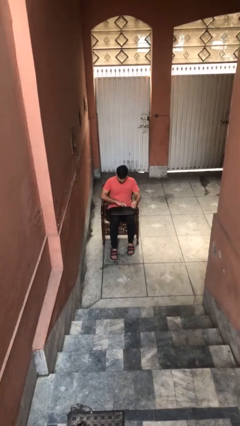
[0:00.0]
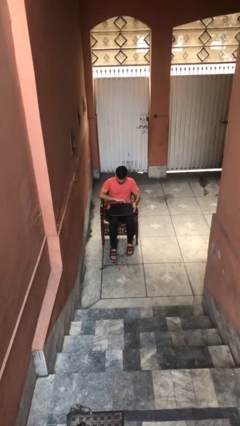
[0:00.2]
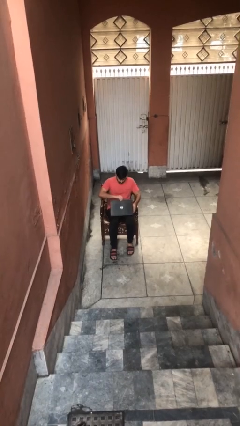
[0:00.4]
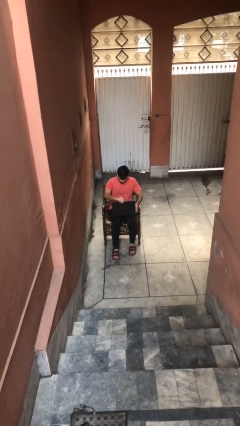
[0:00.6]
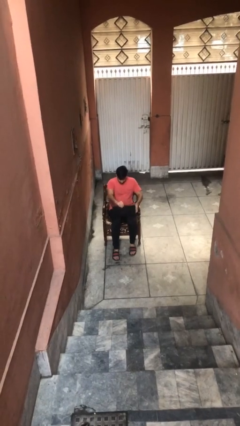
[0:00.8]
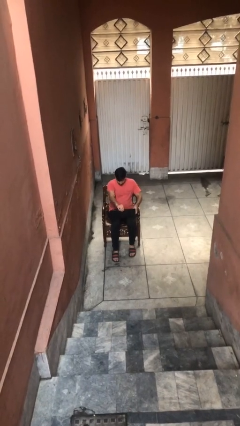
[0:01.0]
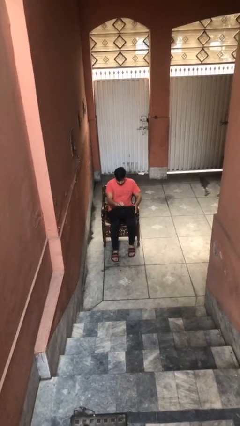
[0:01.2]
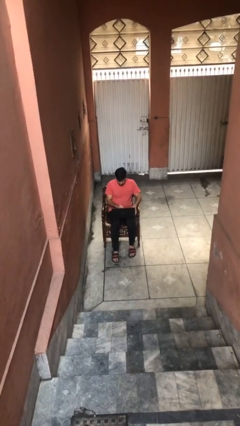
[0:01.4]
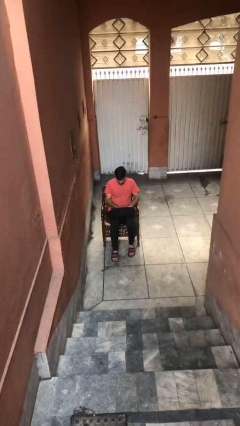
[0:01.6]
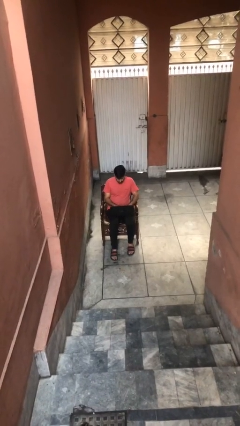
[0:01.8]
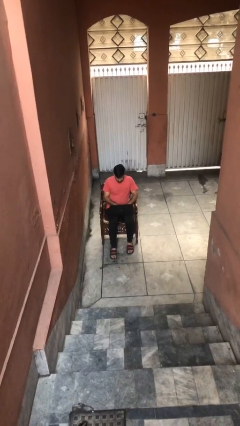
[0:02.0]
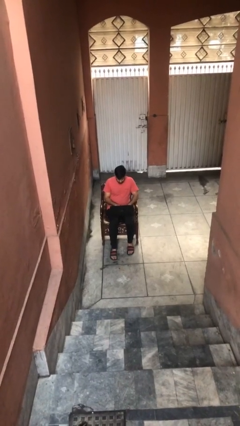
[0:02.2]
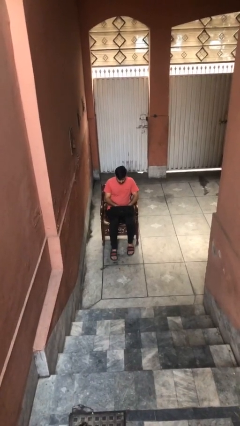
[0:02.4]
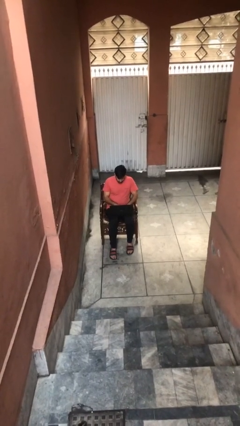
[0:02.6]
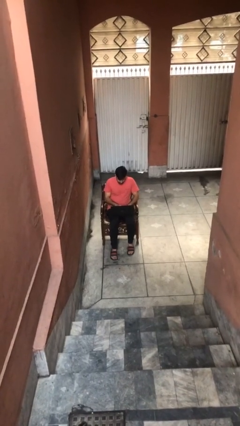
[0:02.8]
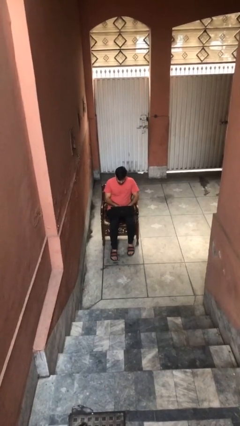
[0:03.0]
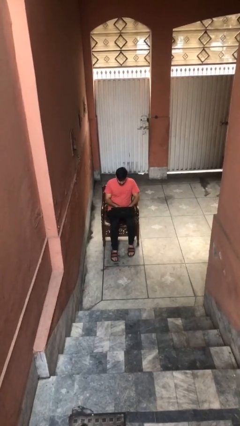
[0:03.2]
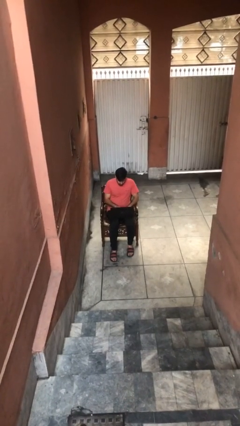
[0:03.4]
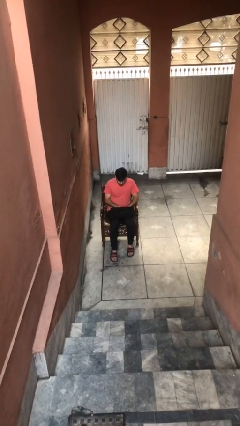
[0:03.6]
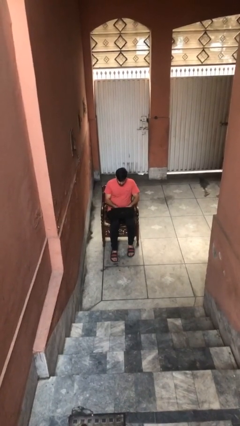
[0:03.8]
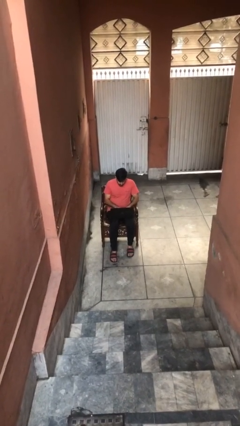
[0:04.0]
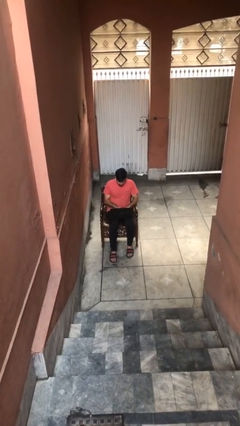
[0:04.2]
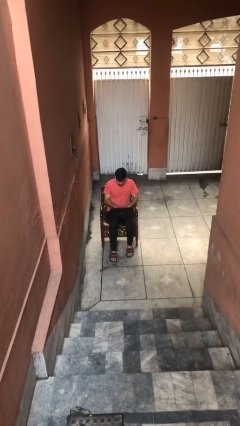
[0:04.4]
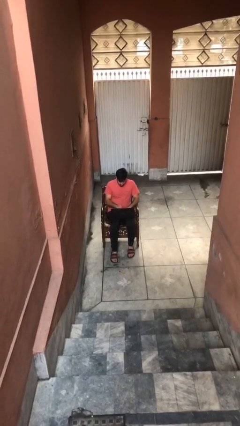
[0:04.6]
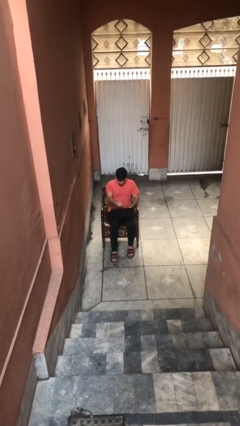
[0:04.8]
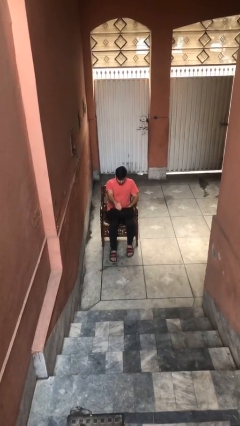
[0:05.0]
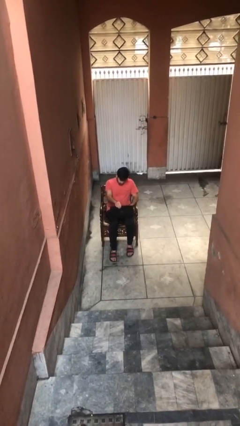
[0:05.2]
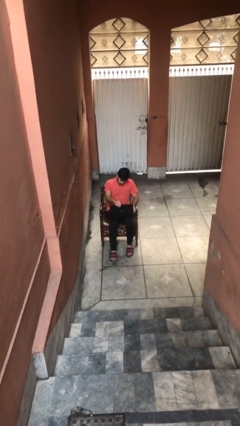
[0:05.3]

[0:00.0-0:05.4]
person interacts with laptop

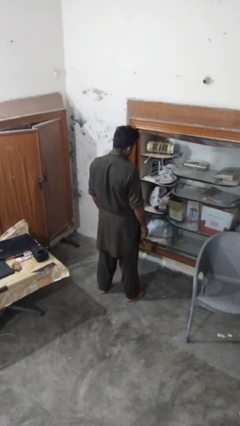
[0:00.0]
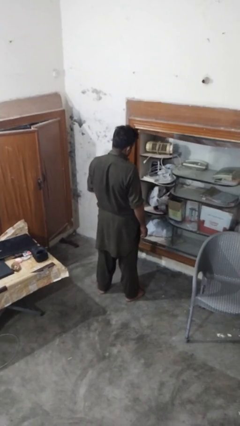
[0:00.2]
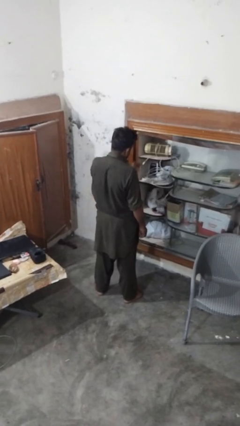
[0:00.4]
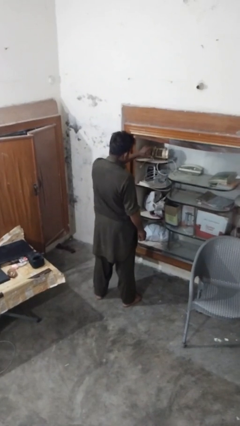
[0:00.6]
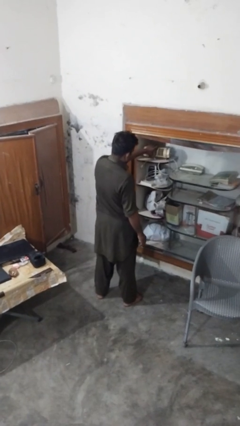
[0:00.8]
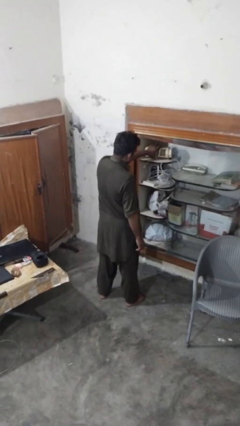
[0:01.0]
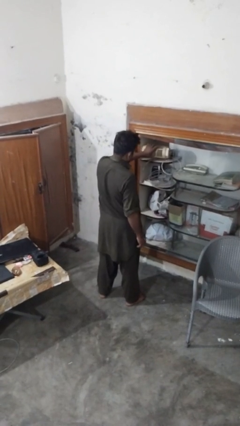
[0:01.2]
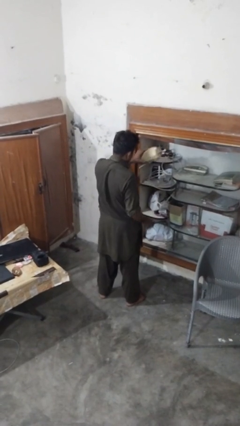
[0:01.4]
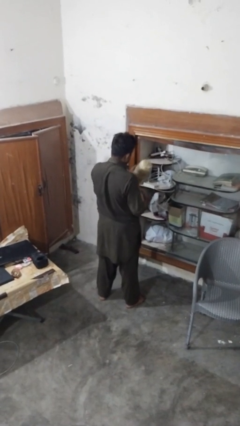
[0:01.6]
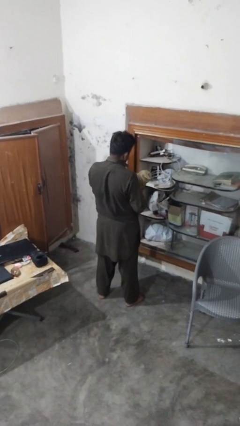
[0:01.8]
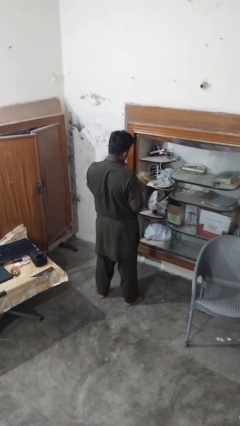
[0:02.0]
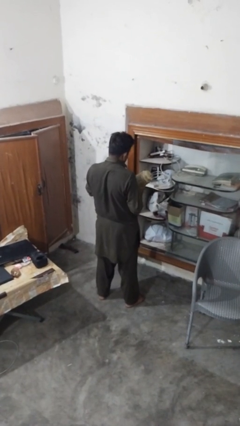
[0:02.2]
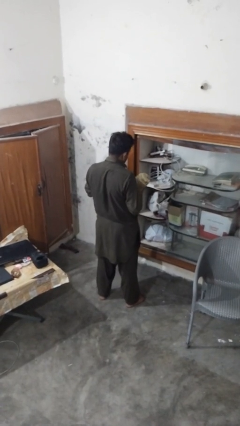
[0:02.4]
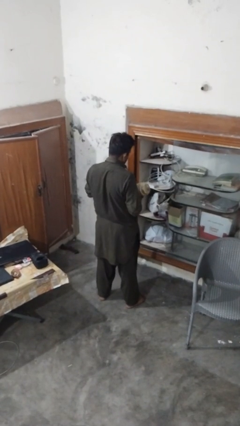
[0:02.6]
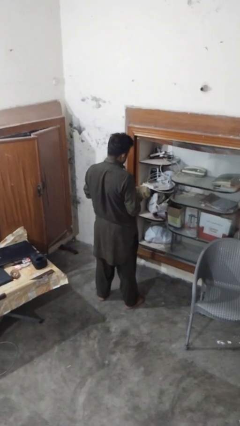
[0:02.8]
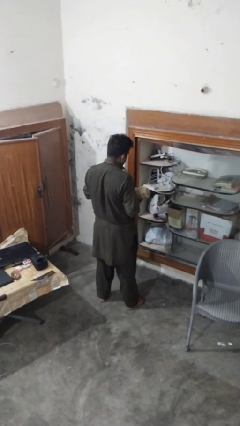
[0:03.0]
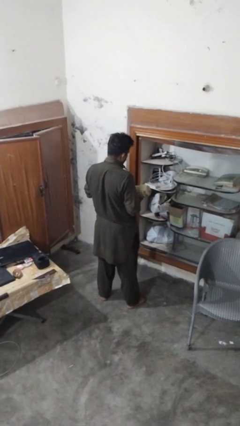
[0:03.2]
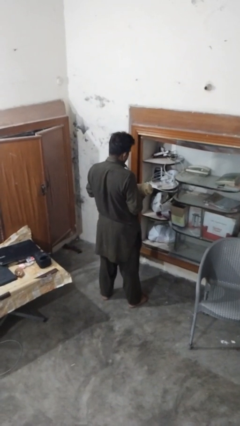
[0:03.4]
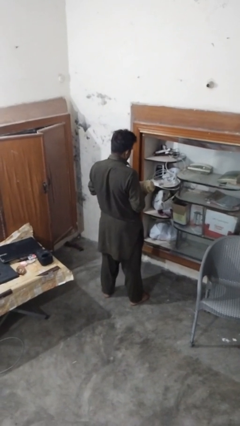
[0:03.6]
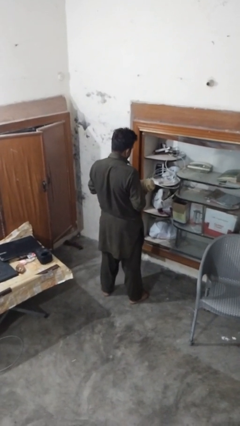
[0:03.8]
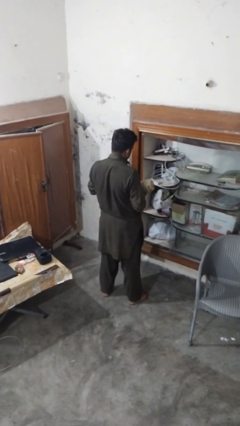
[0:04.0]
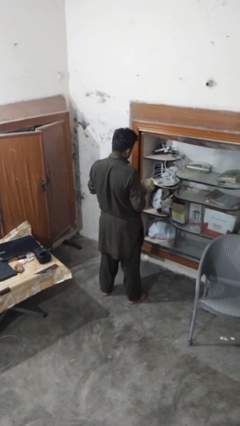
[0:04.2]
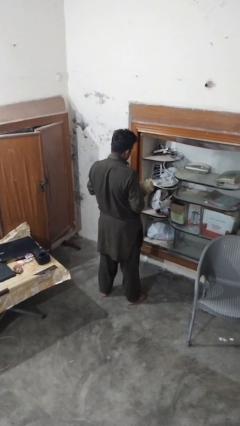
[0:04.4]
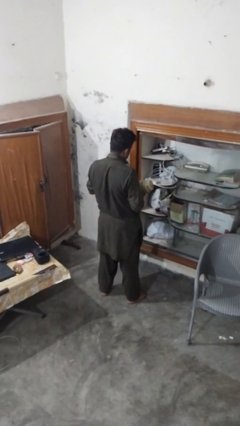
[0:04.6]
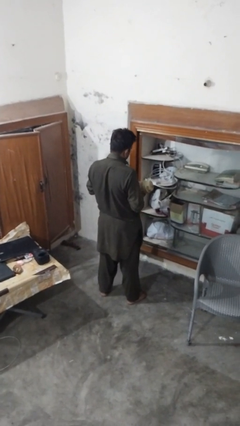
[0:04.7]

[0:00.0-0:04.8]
person picks up object from countertop

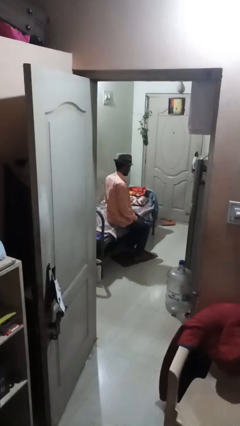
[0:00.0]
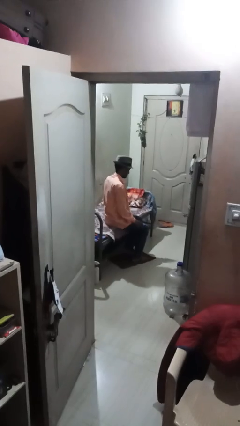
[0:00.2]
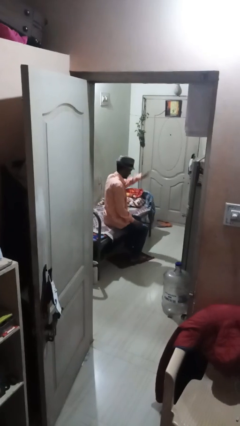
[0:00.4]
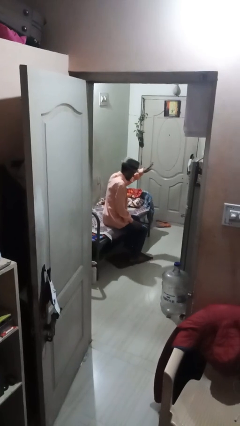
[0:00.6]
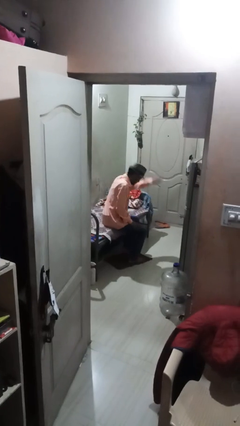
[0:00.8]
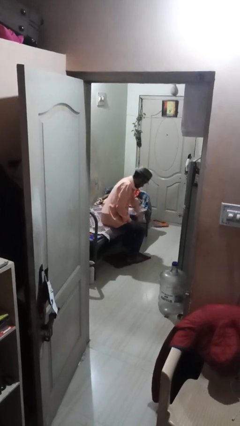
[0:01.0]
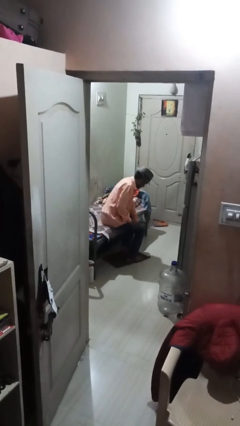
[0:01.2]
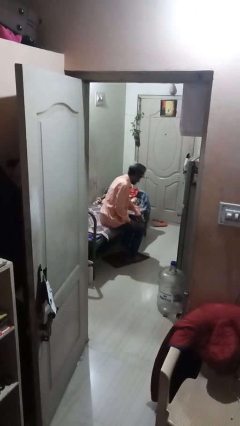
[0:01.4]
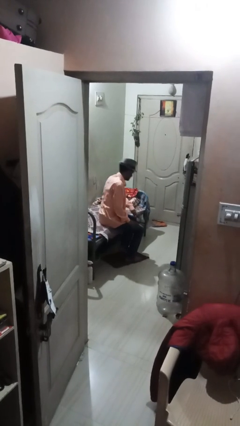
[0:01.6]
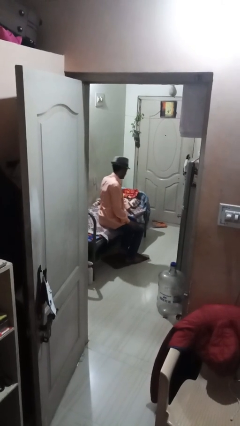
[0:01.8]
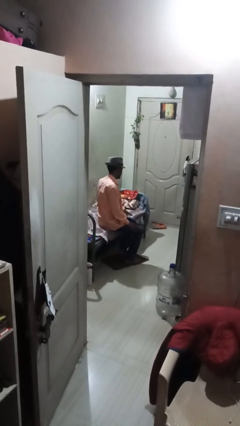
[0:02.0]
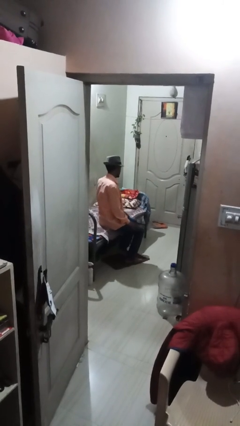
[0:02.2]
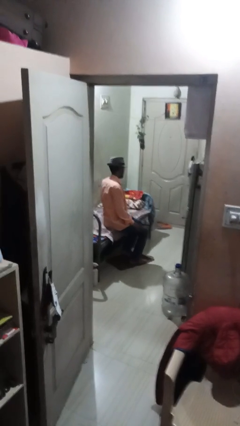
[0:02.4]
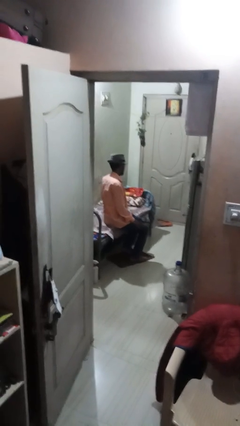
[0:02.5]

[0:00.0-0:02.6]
person swats bug

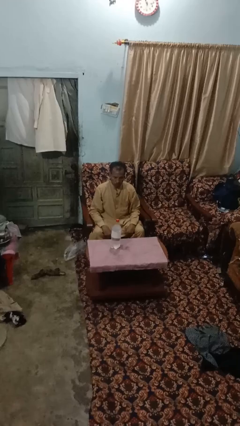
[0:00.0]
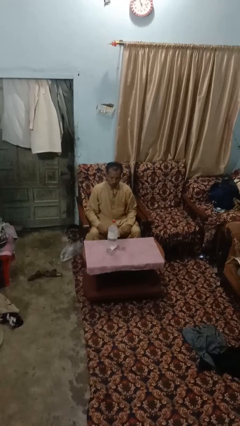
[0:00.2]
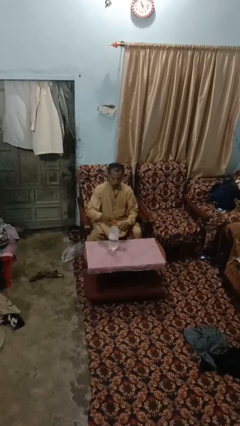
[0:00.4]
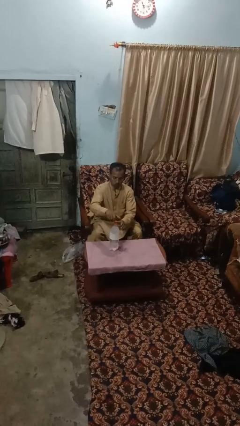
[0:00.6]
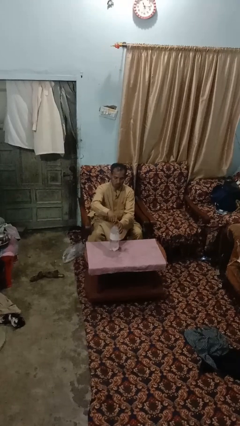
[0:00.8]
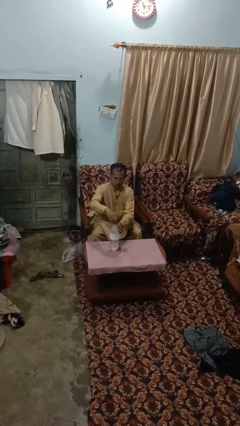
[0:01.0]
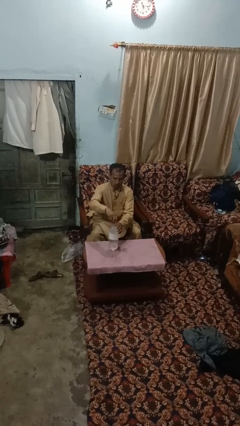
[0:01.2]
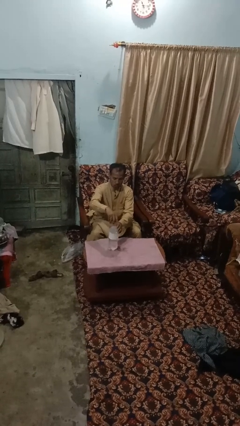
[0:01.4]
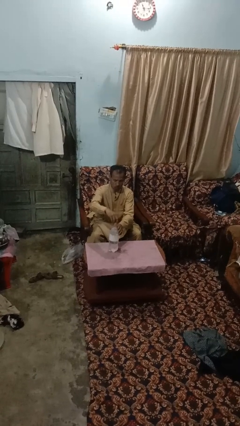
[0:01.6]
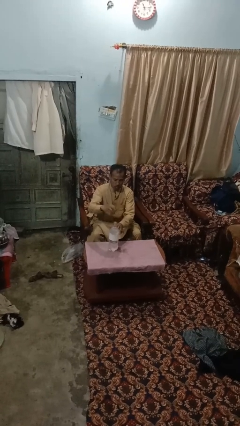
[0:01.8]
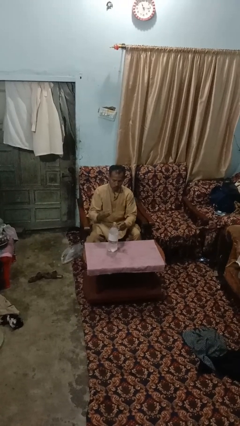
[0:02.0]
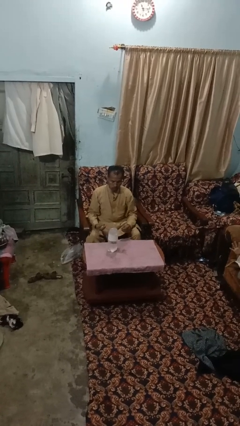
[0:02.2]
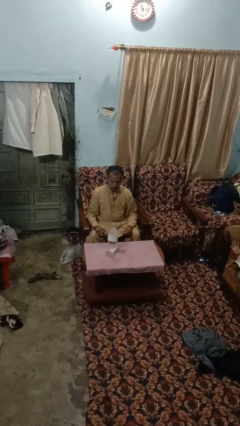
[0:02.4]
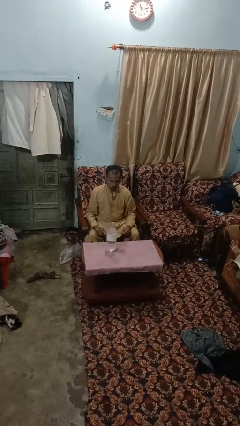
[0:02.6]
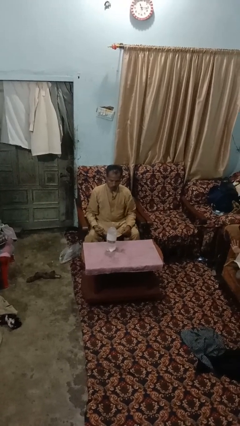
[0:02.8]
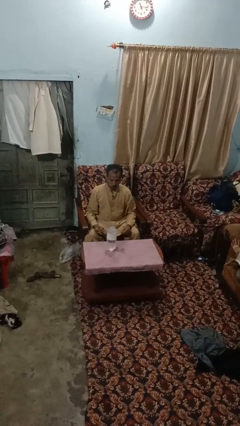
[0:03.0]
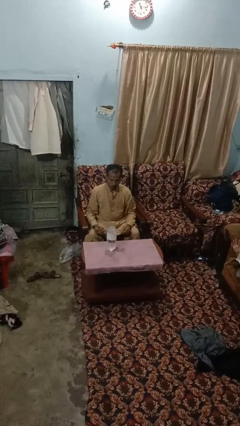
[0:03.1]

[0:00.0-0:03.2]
person unscrews lid from bottle

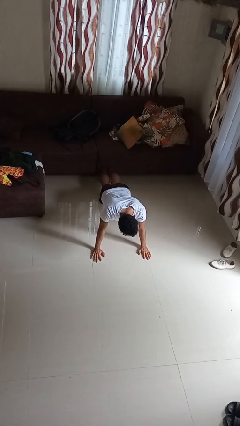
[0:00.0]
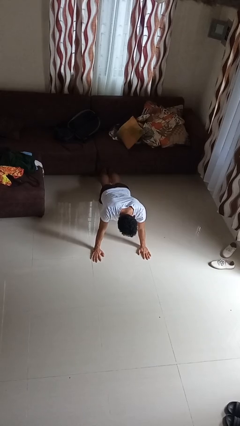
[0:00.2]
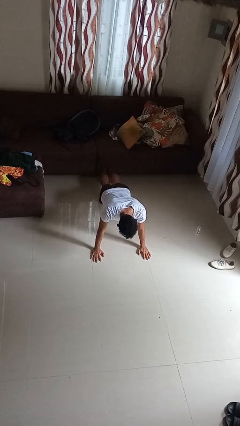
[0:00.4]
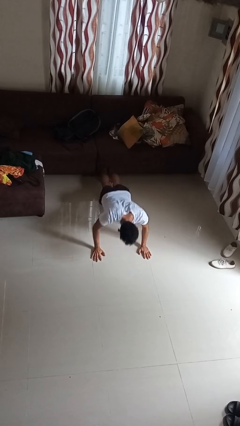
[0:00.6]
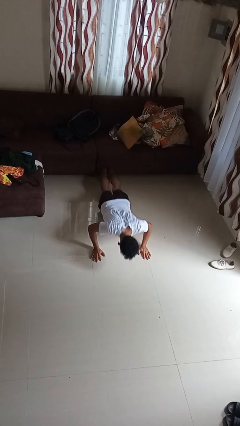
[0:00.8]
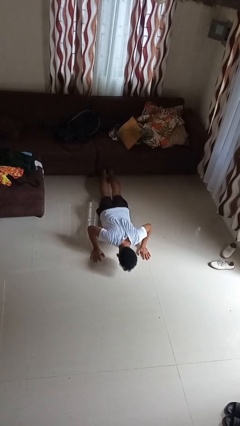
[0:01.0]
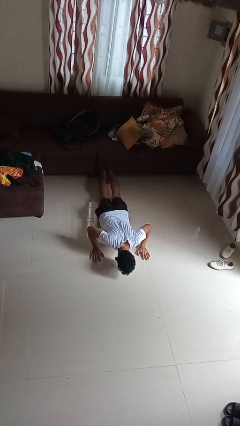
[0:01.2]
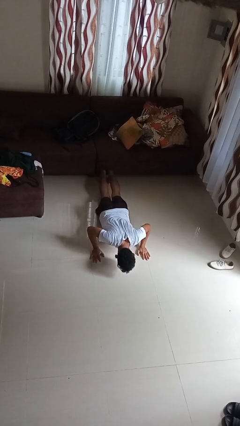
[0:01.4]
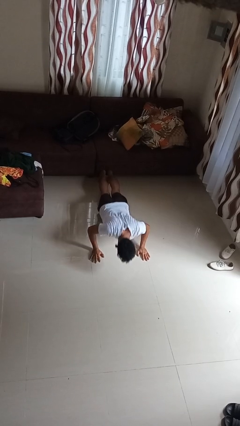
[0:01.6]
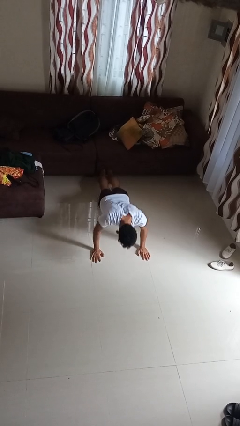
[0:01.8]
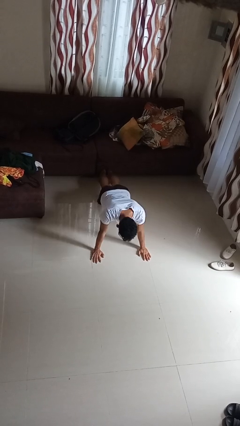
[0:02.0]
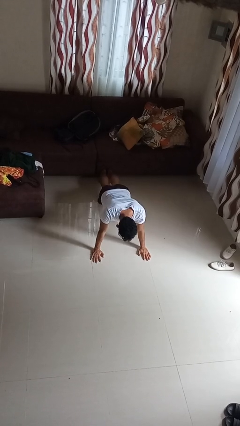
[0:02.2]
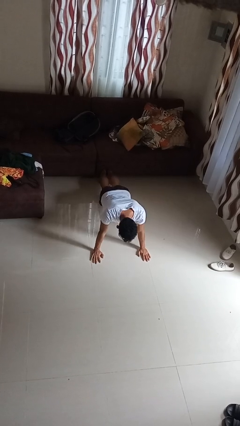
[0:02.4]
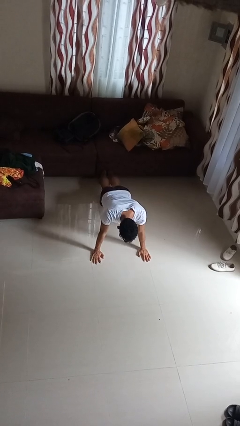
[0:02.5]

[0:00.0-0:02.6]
person exercises with pushup
